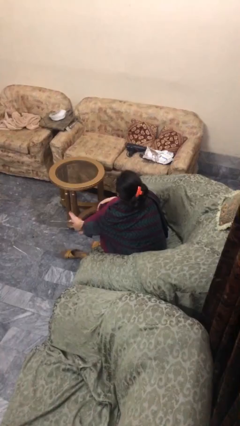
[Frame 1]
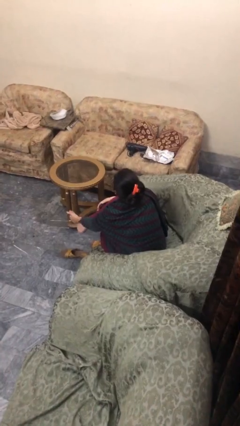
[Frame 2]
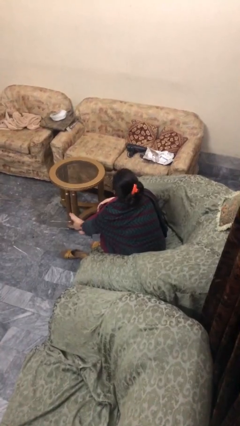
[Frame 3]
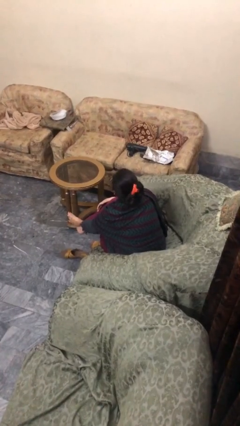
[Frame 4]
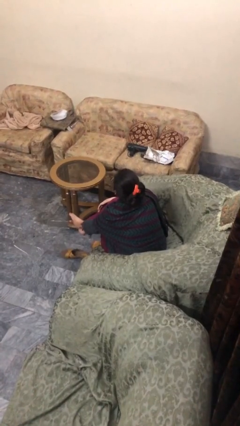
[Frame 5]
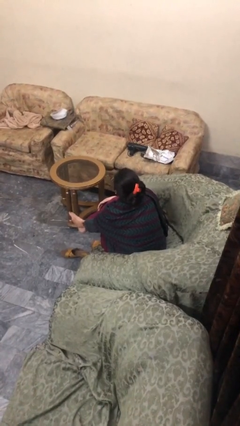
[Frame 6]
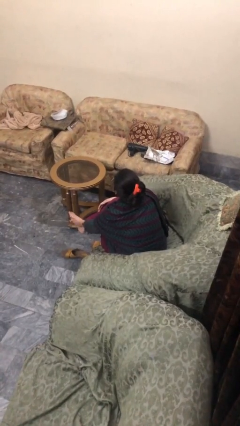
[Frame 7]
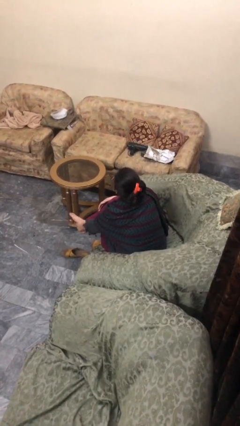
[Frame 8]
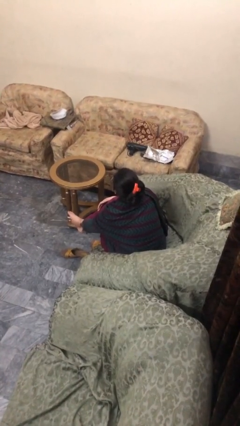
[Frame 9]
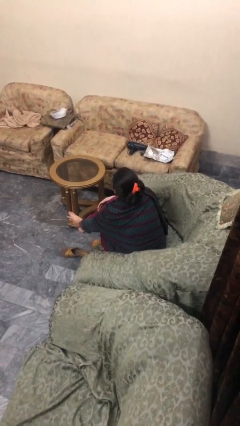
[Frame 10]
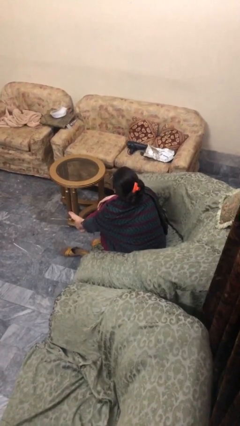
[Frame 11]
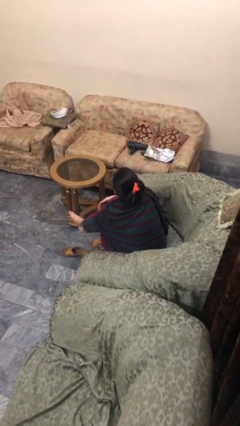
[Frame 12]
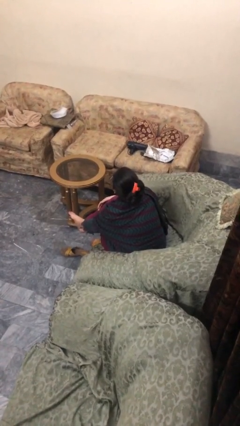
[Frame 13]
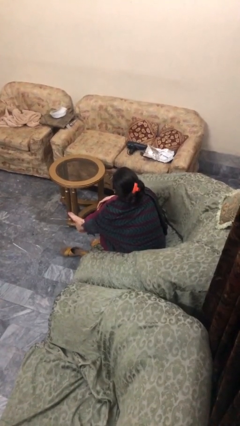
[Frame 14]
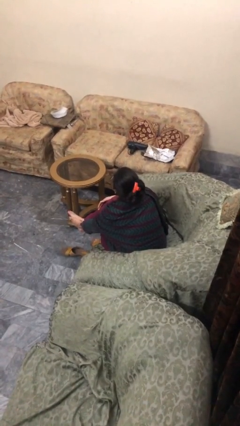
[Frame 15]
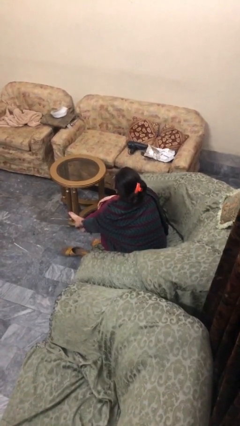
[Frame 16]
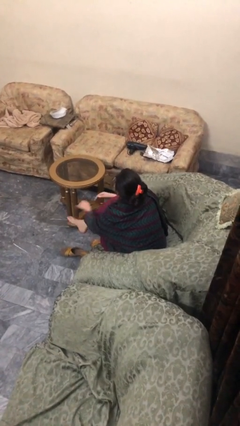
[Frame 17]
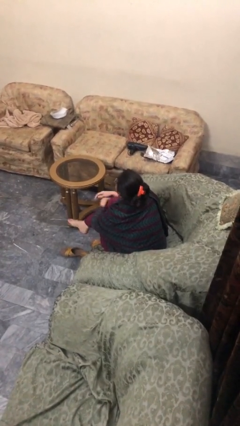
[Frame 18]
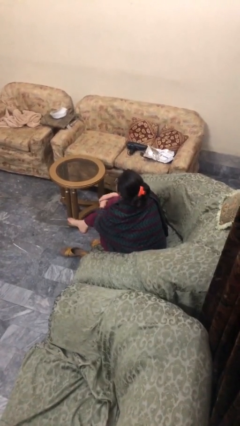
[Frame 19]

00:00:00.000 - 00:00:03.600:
person rubs foot

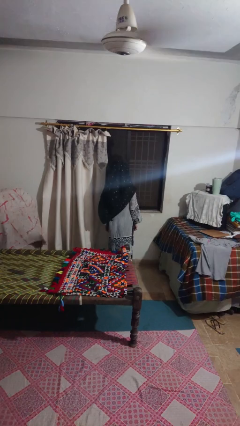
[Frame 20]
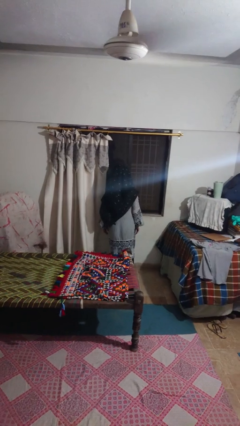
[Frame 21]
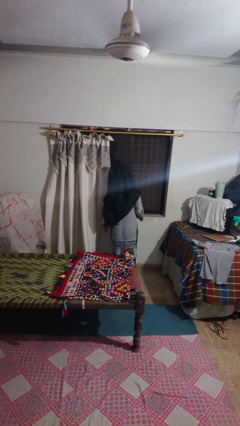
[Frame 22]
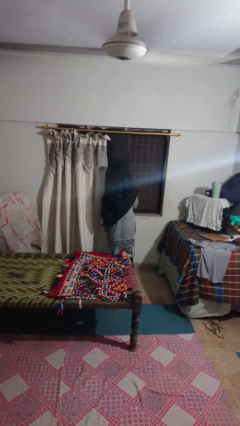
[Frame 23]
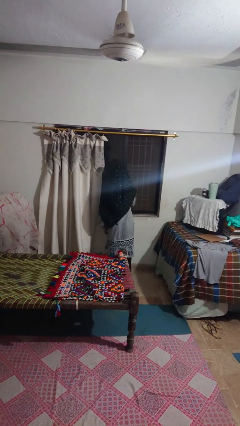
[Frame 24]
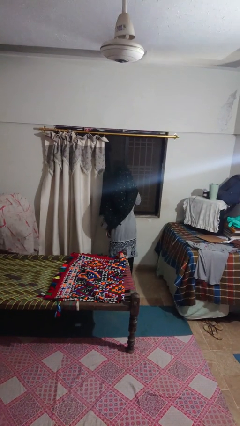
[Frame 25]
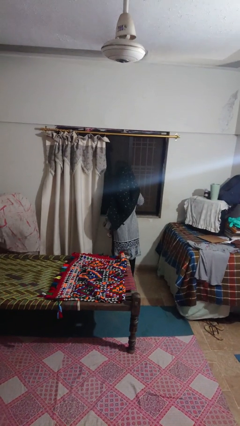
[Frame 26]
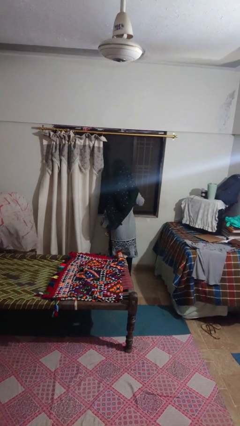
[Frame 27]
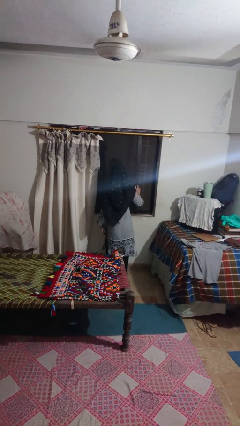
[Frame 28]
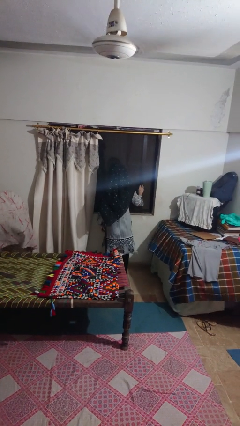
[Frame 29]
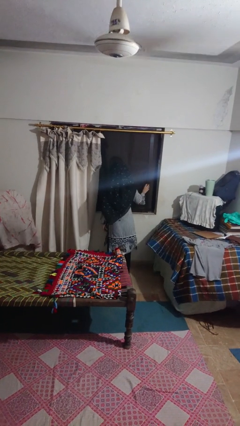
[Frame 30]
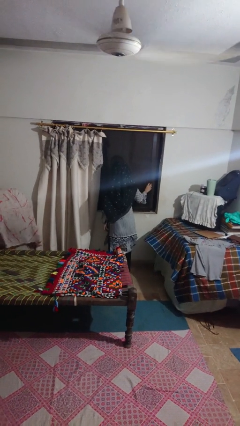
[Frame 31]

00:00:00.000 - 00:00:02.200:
person closes home window

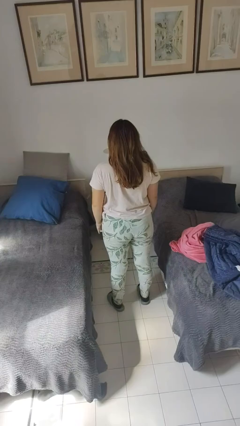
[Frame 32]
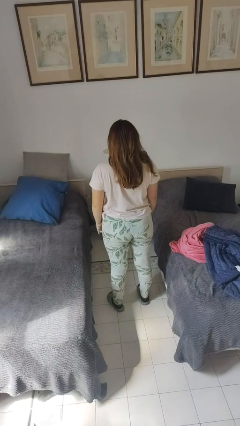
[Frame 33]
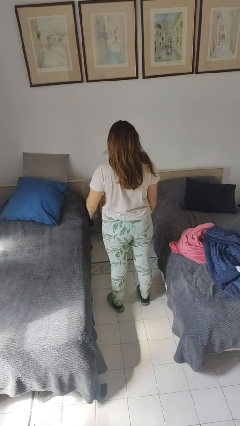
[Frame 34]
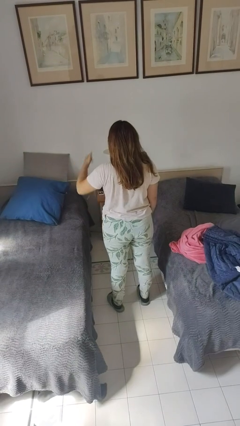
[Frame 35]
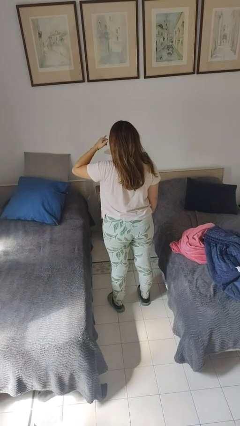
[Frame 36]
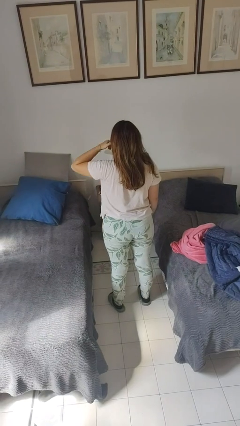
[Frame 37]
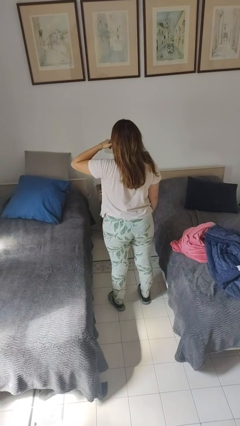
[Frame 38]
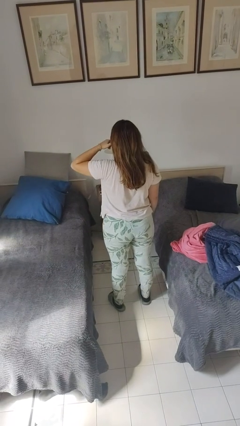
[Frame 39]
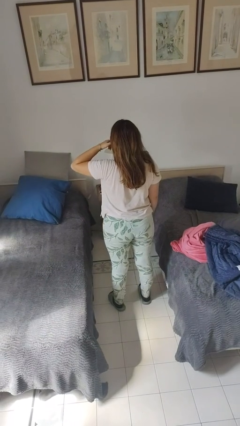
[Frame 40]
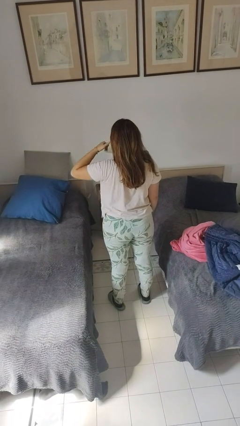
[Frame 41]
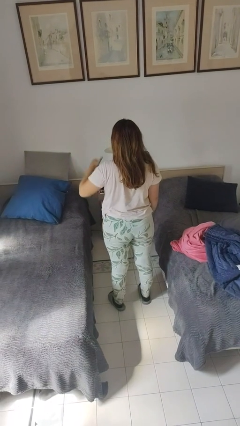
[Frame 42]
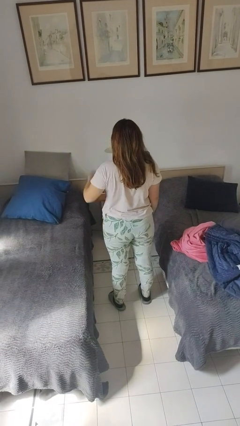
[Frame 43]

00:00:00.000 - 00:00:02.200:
person gestures call me

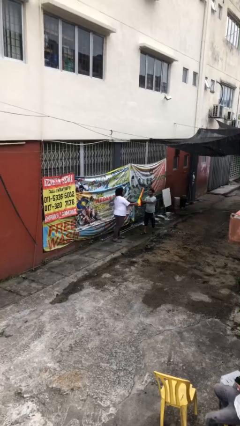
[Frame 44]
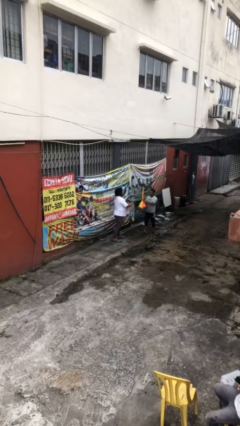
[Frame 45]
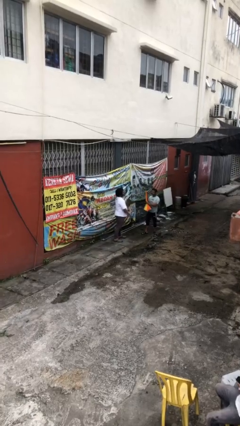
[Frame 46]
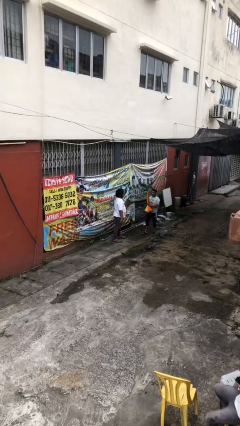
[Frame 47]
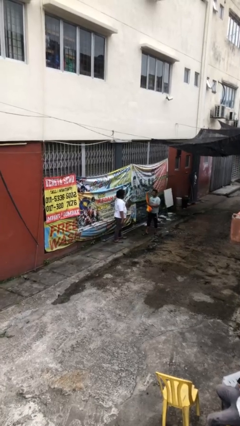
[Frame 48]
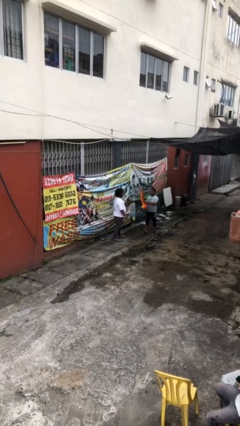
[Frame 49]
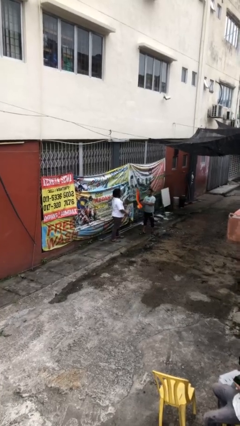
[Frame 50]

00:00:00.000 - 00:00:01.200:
person transfers object to person

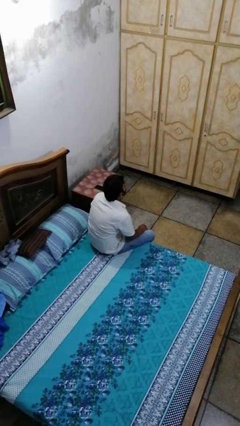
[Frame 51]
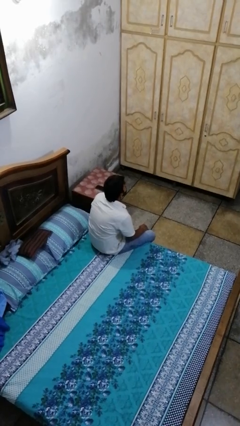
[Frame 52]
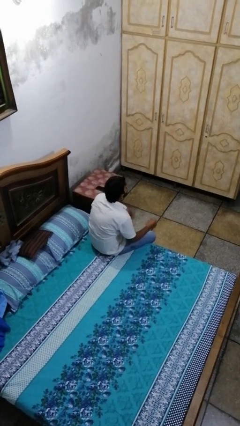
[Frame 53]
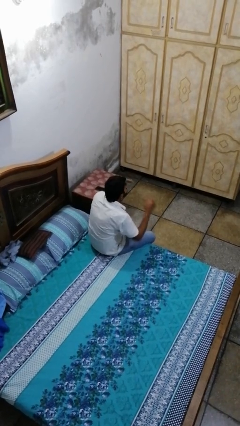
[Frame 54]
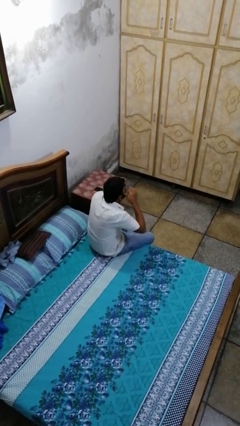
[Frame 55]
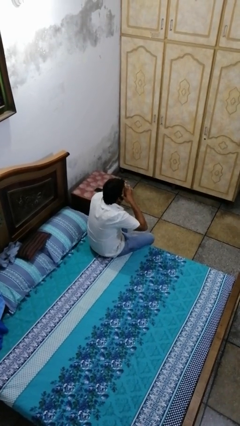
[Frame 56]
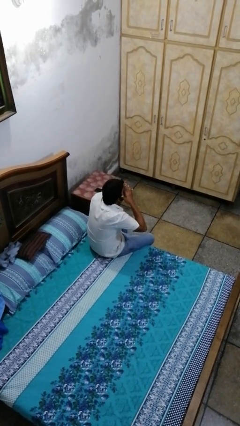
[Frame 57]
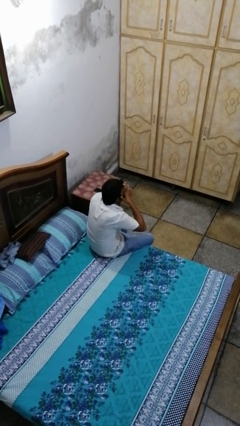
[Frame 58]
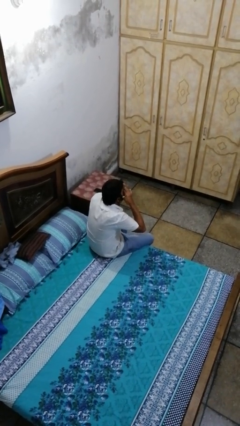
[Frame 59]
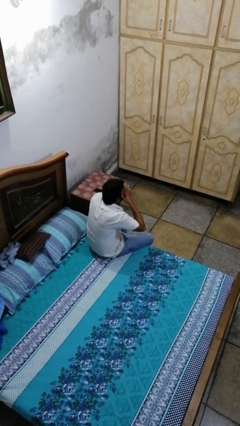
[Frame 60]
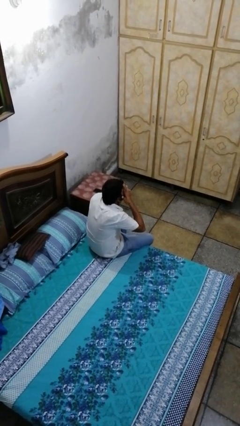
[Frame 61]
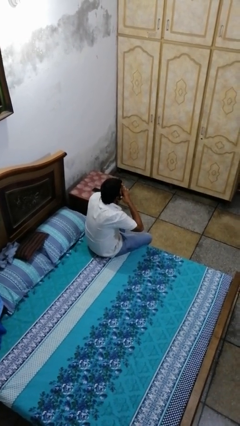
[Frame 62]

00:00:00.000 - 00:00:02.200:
person rubs eyes

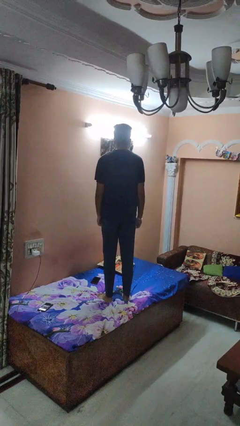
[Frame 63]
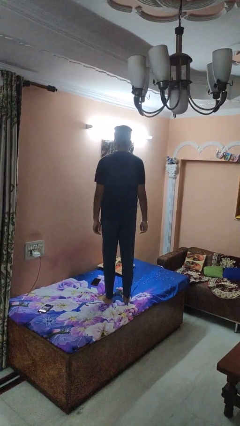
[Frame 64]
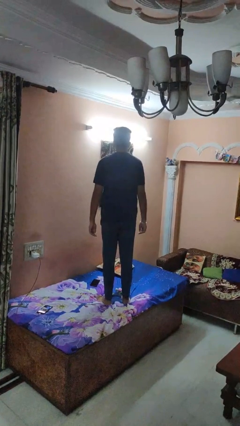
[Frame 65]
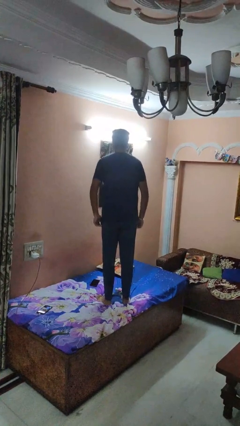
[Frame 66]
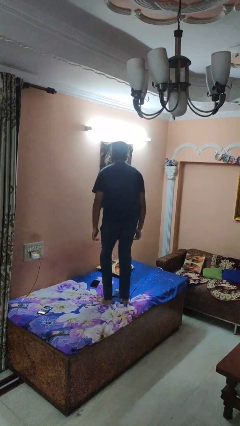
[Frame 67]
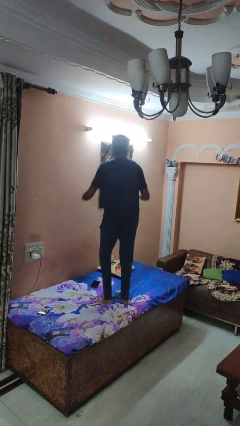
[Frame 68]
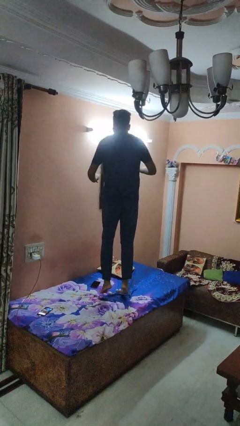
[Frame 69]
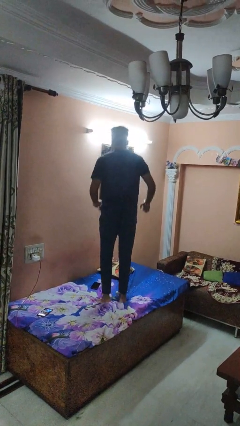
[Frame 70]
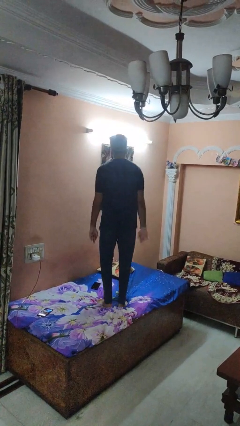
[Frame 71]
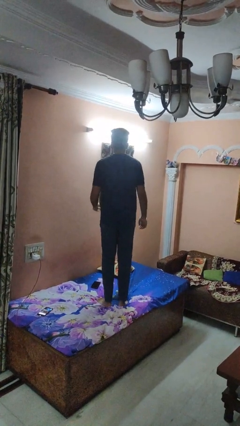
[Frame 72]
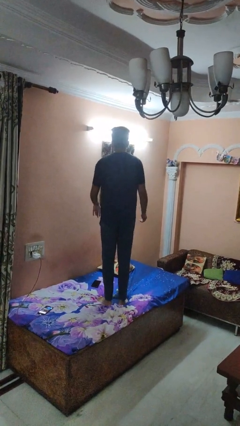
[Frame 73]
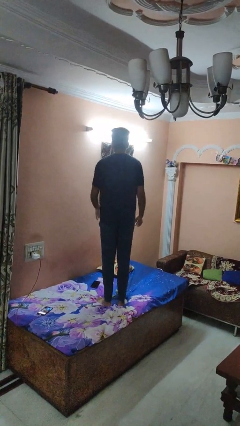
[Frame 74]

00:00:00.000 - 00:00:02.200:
person jumps on bed

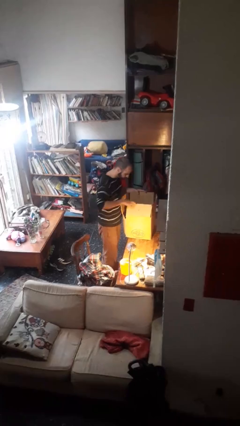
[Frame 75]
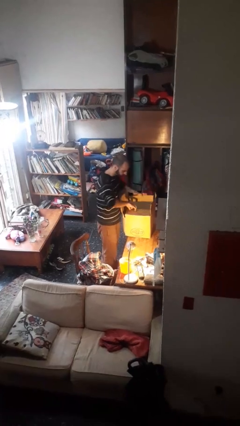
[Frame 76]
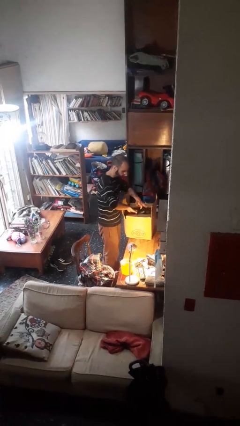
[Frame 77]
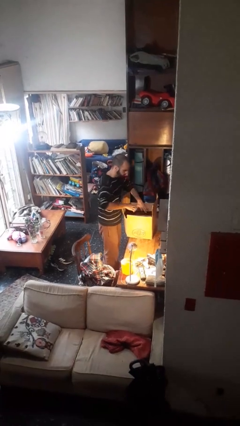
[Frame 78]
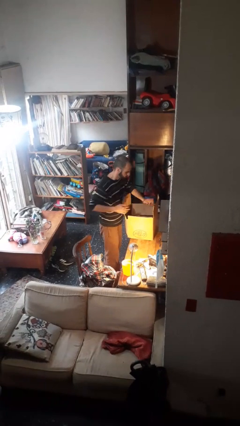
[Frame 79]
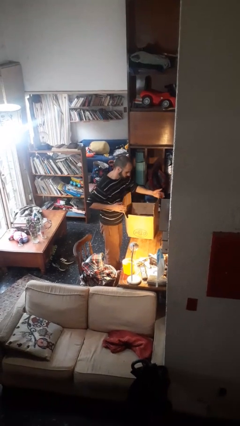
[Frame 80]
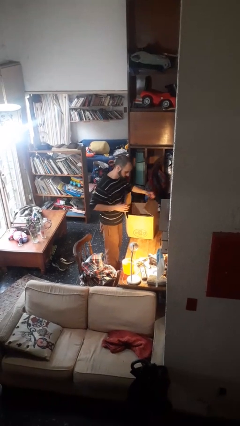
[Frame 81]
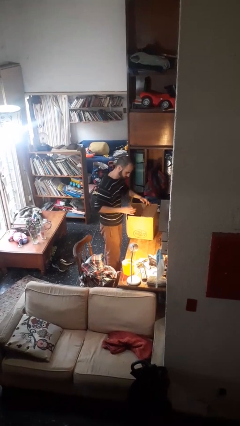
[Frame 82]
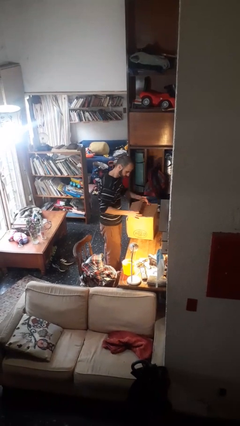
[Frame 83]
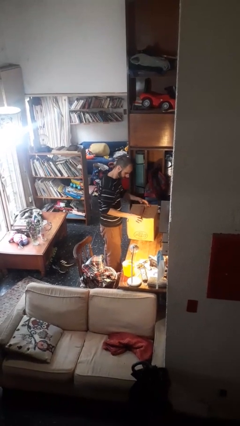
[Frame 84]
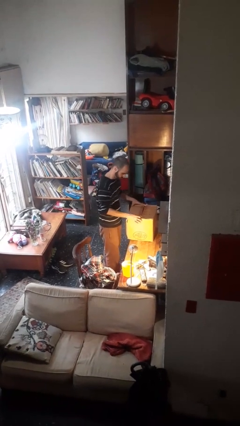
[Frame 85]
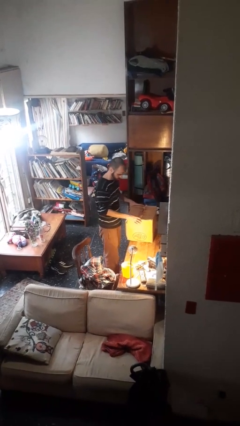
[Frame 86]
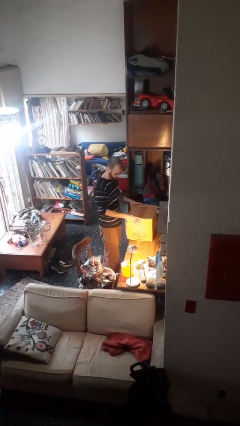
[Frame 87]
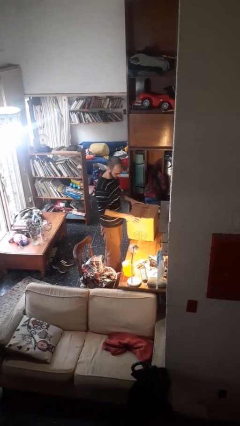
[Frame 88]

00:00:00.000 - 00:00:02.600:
person closes box

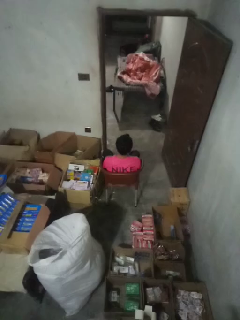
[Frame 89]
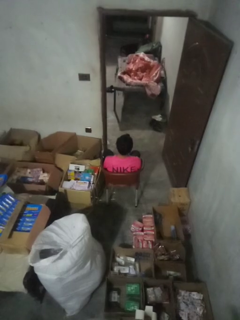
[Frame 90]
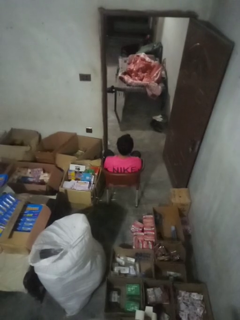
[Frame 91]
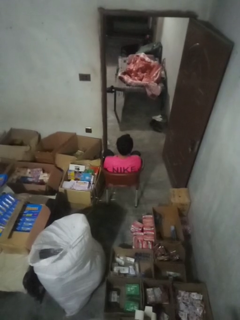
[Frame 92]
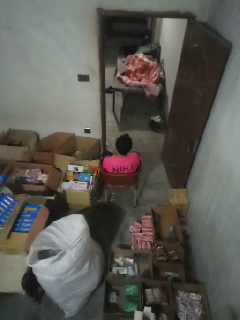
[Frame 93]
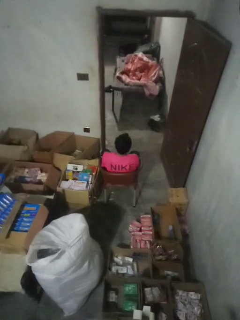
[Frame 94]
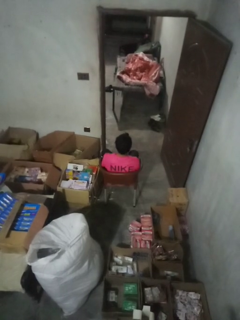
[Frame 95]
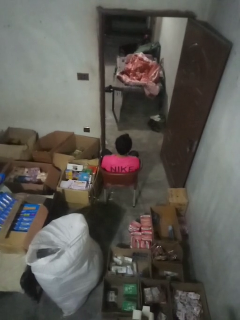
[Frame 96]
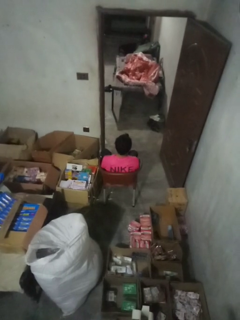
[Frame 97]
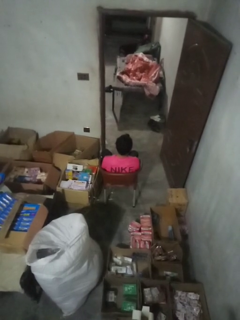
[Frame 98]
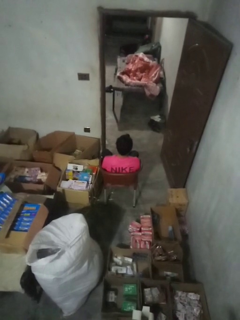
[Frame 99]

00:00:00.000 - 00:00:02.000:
person shrugs
